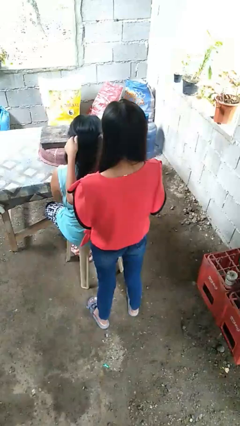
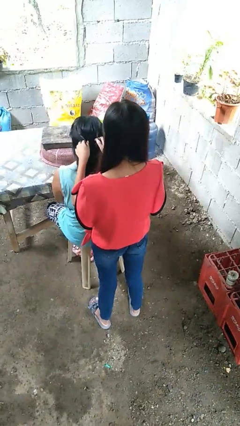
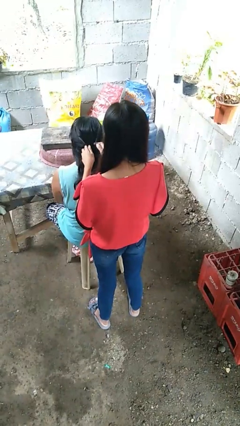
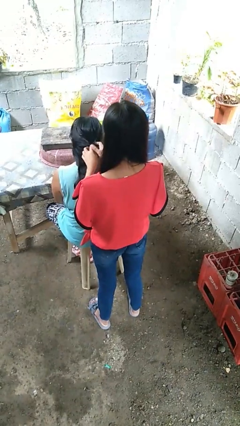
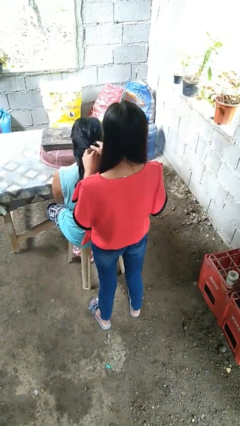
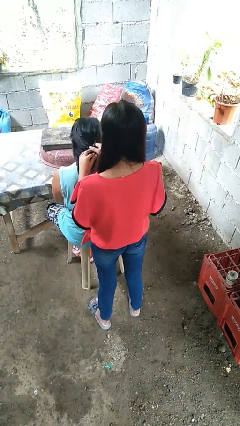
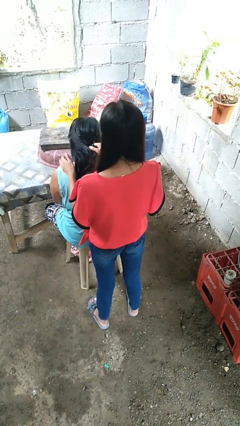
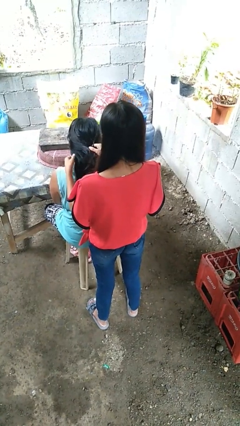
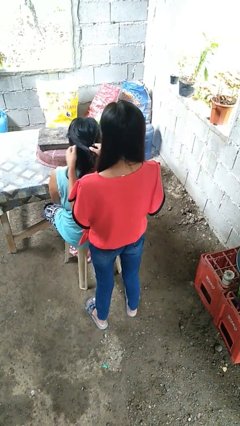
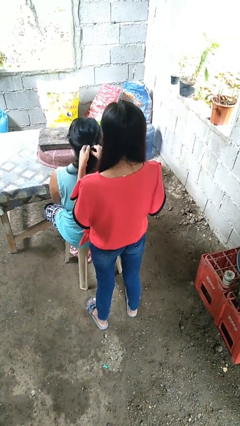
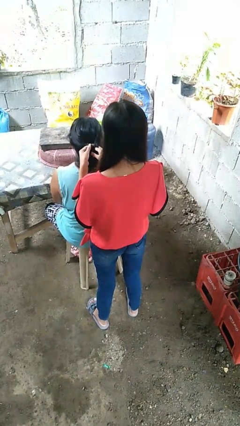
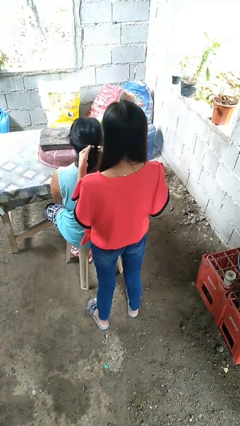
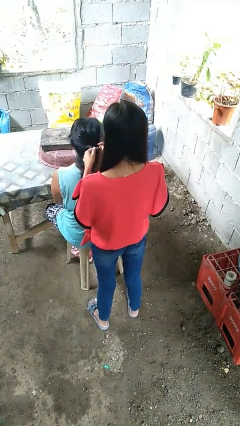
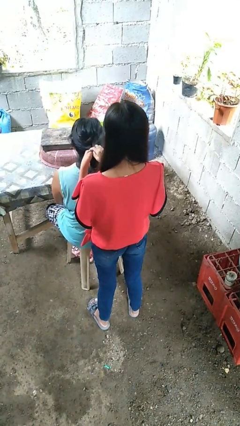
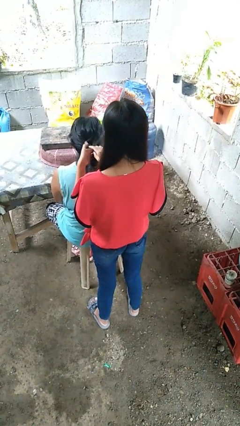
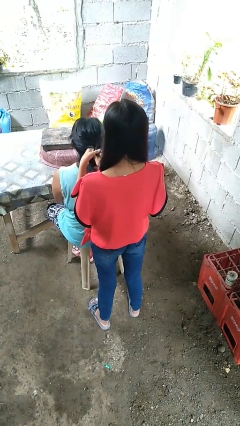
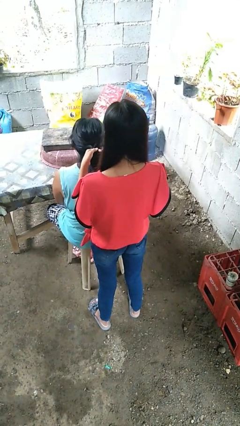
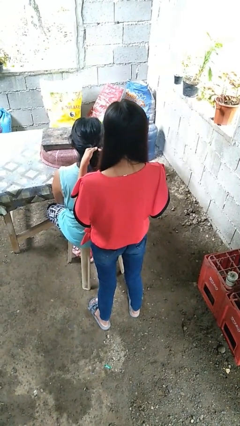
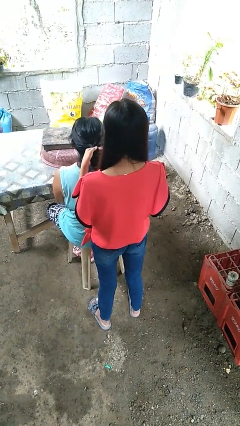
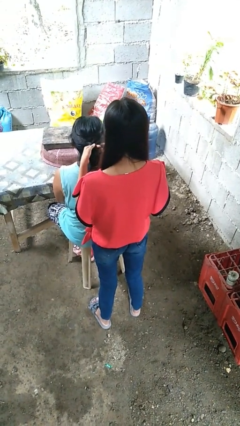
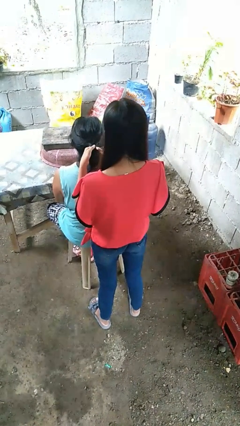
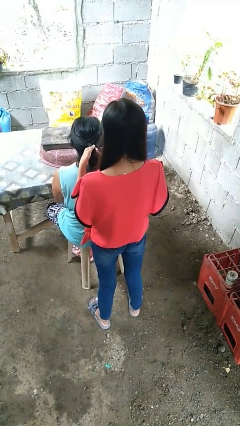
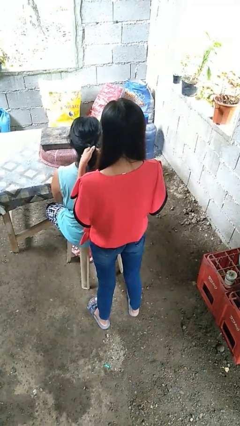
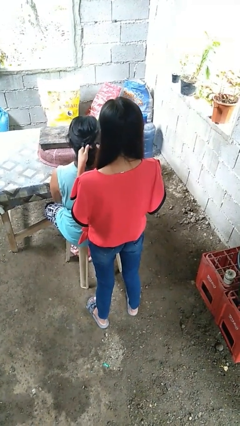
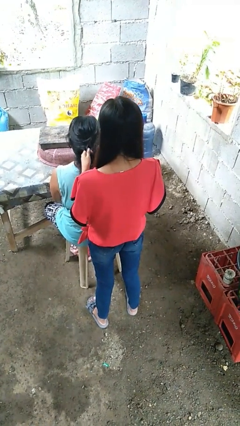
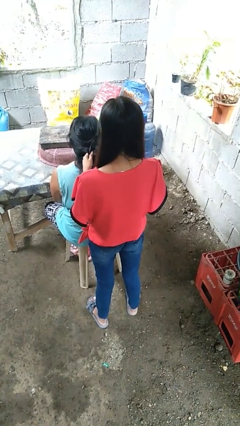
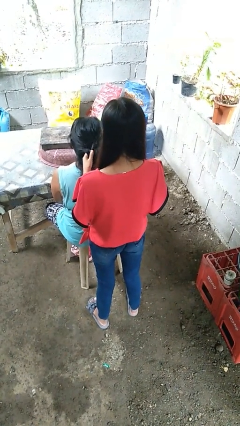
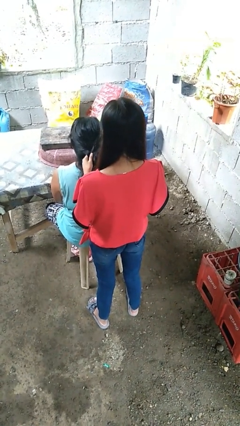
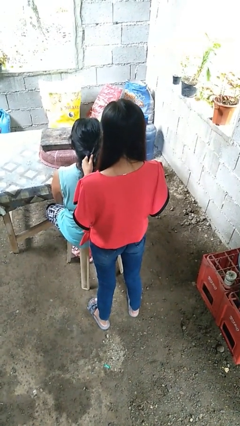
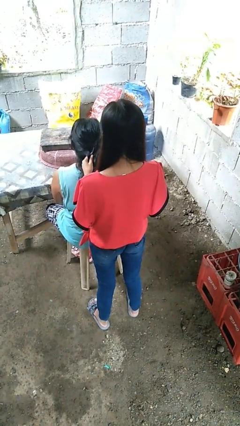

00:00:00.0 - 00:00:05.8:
person braids hair of person

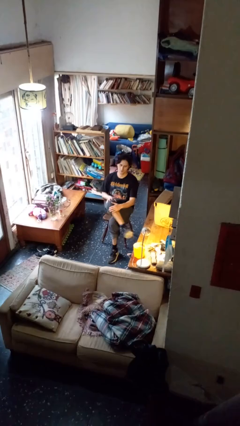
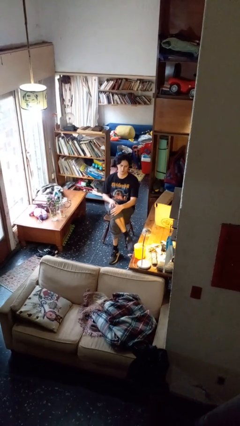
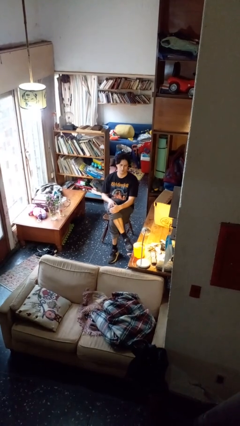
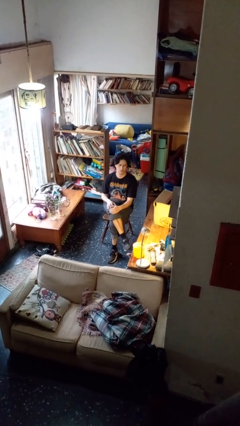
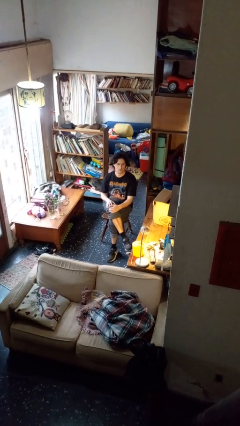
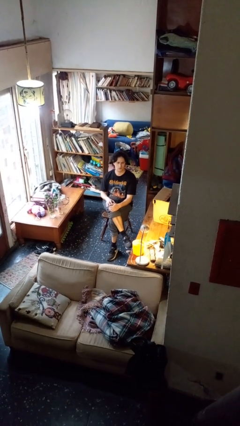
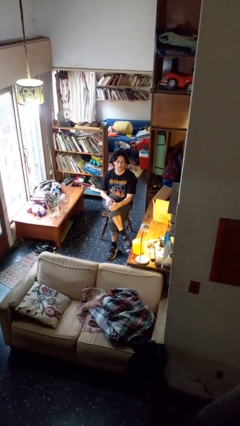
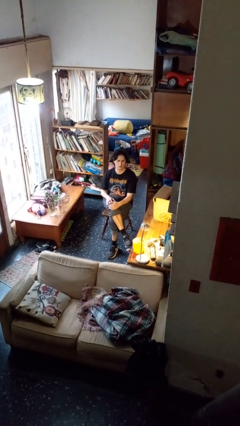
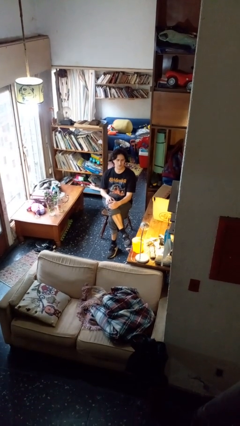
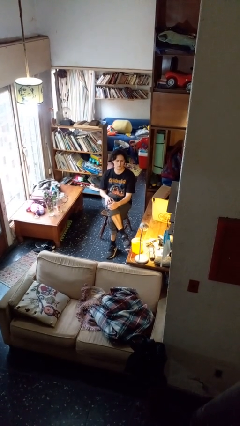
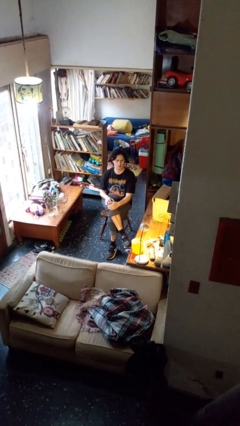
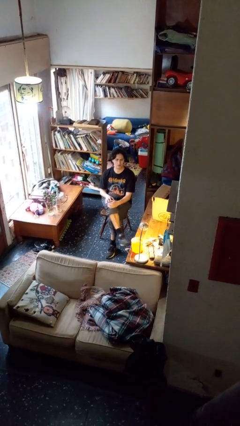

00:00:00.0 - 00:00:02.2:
person crosses legs

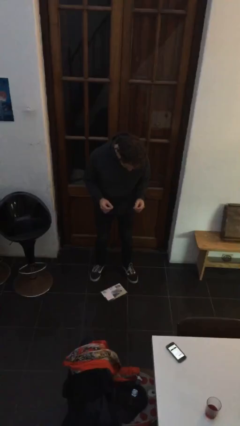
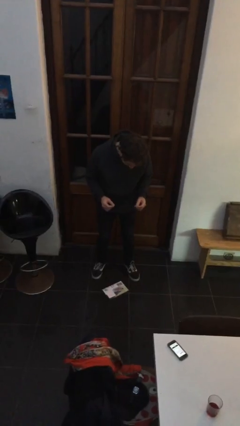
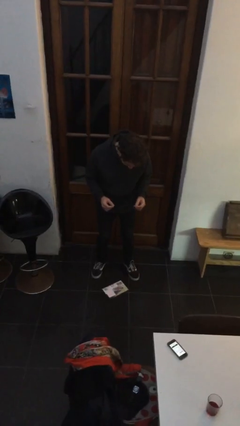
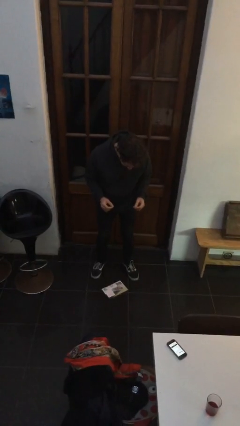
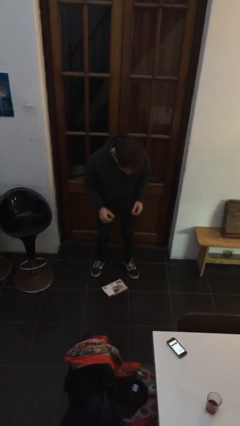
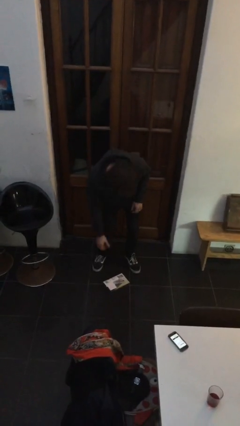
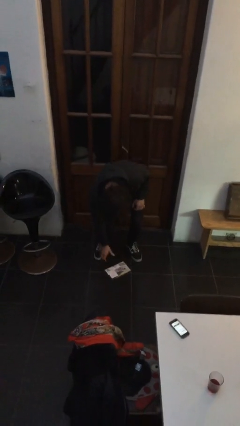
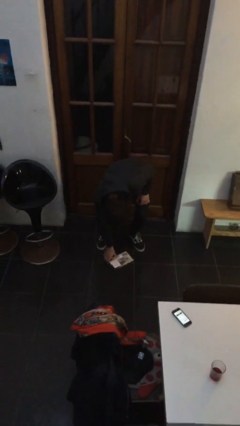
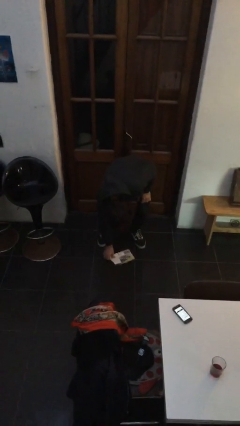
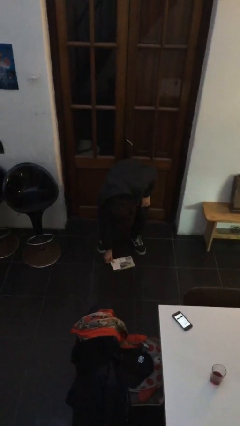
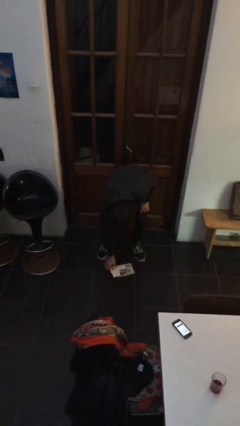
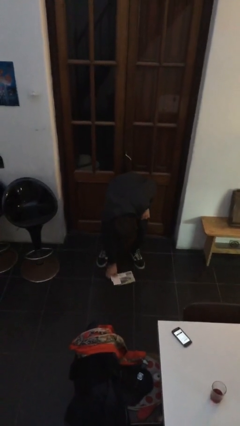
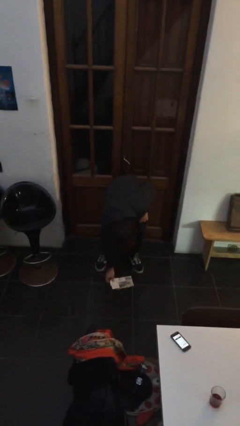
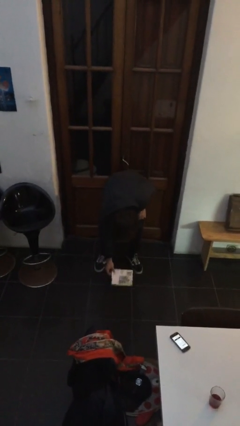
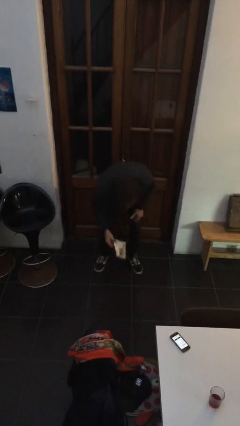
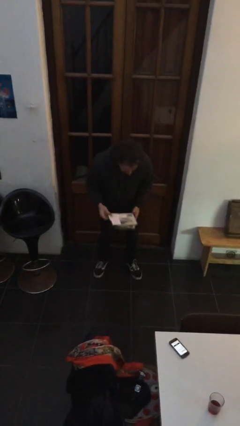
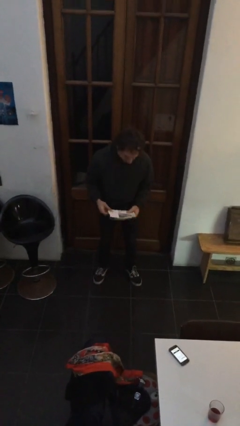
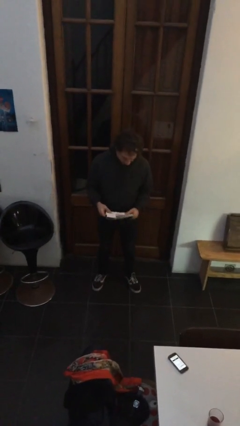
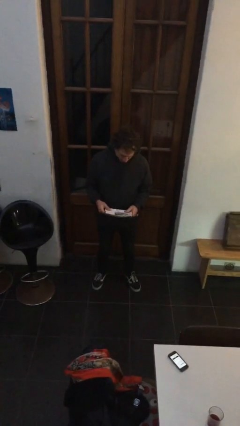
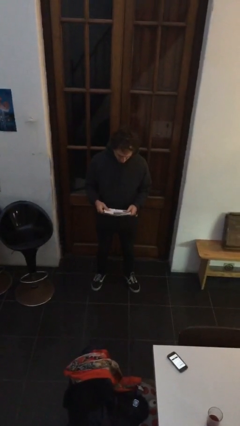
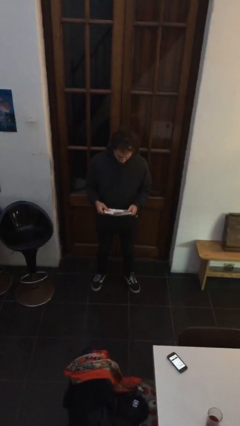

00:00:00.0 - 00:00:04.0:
person picks up object from floor

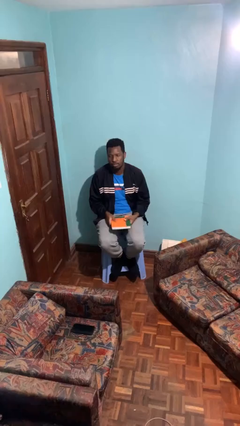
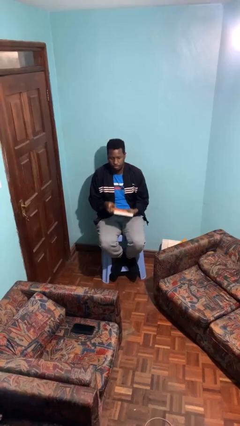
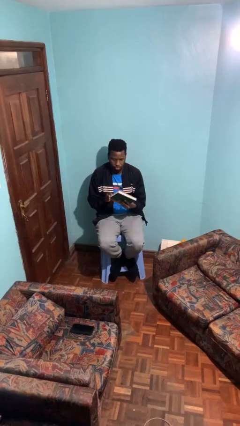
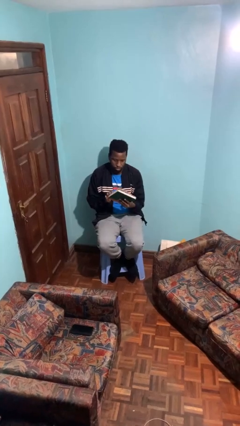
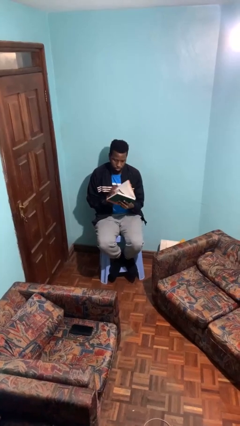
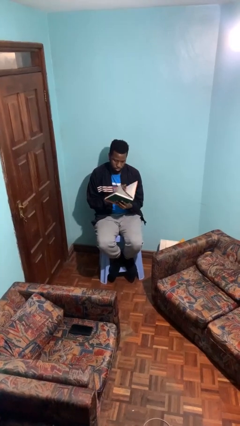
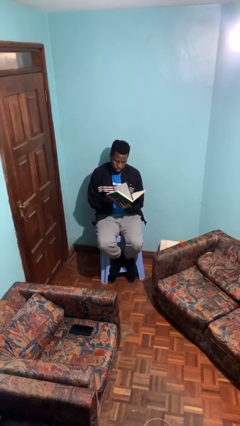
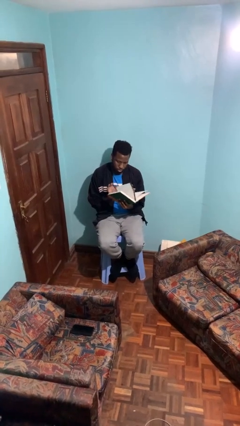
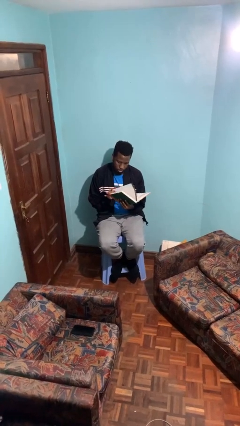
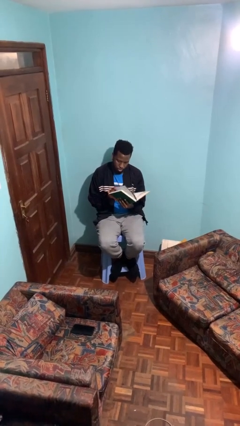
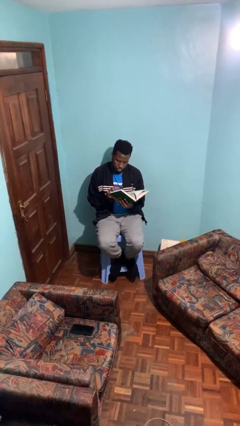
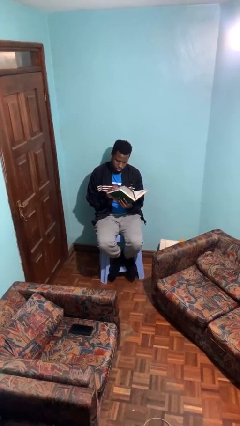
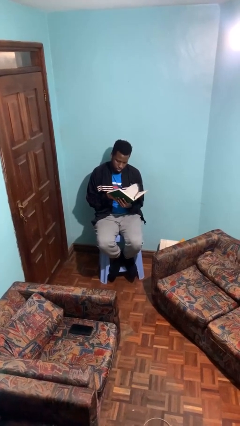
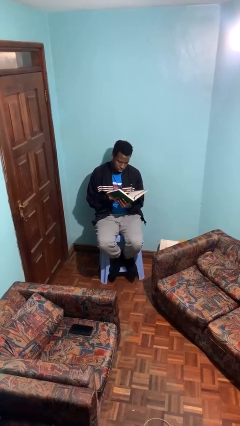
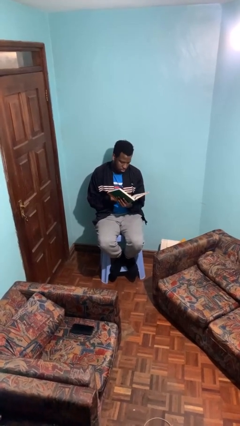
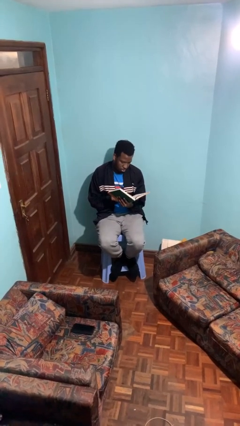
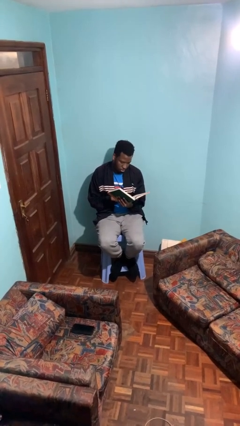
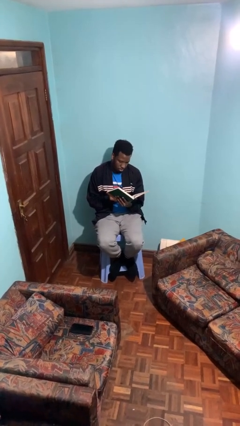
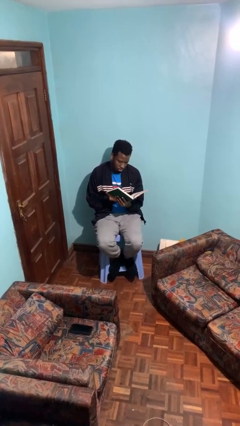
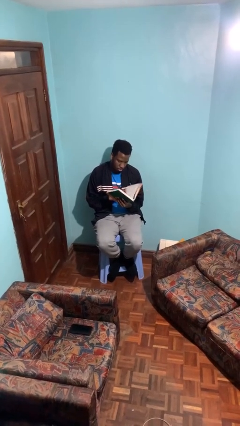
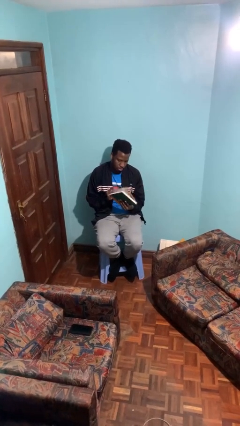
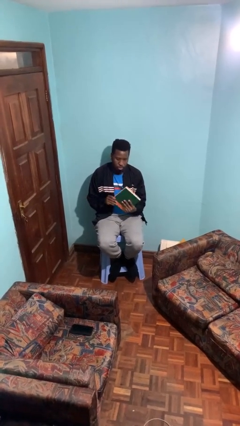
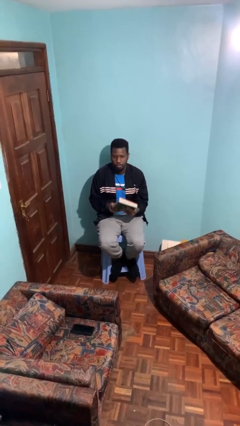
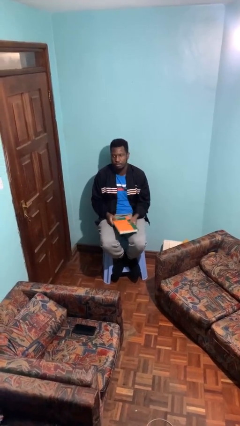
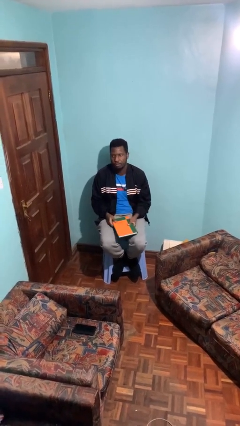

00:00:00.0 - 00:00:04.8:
person reads book

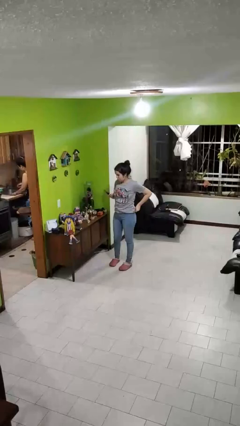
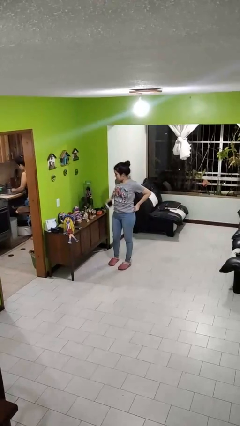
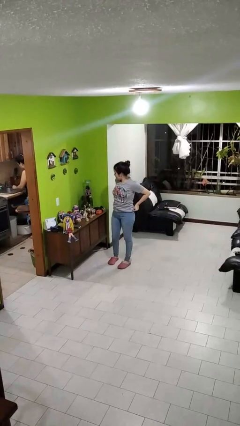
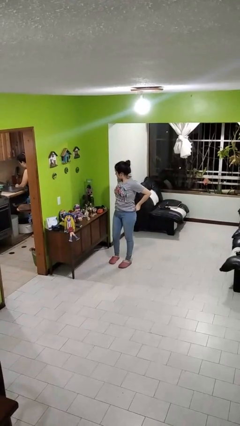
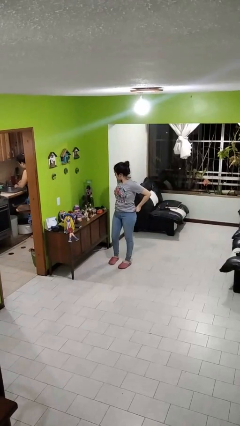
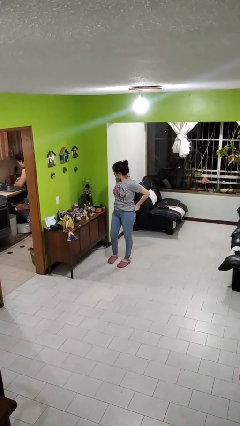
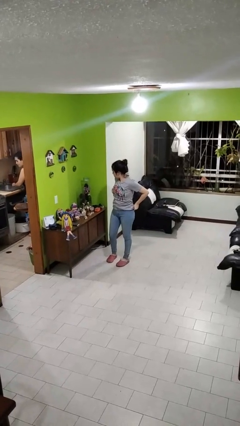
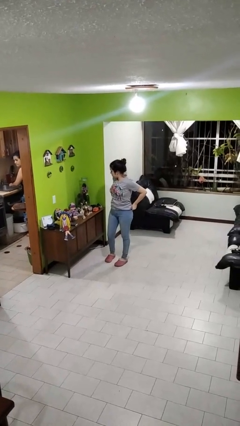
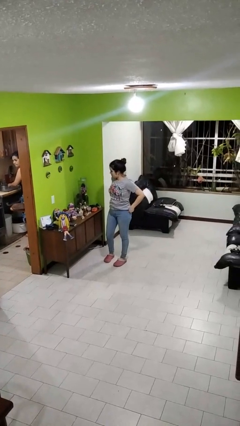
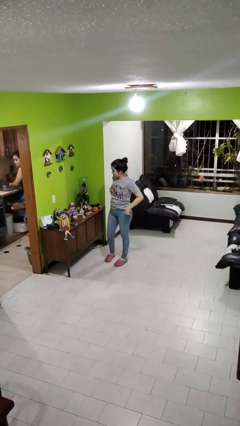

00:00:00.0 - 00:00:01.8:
person puts phone into pocket
